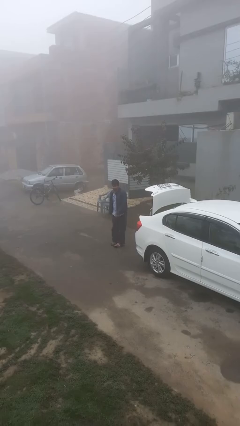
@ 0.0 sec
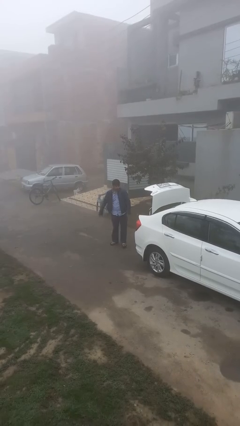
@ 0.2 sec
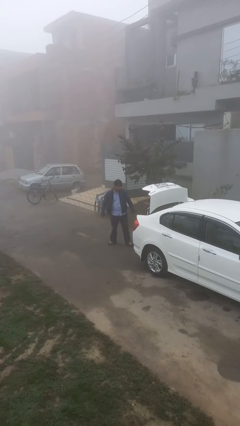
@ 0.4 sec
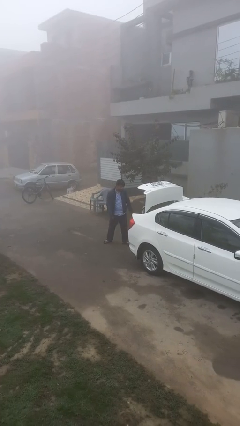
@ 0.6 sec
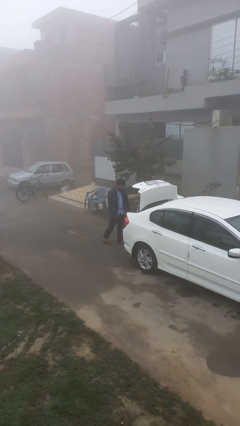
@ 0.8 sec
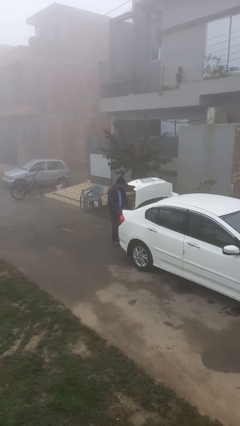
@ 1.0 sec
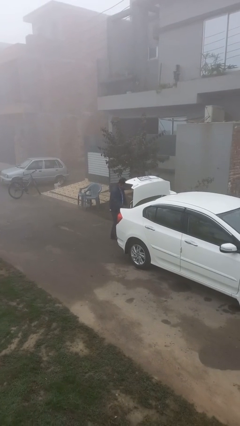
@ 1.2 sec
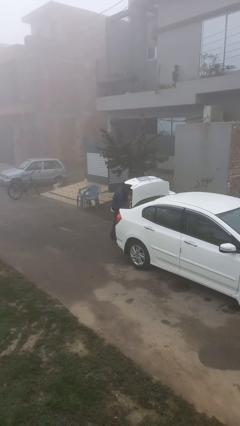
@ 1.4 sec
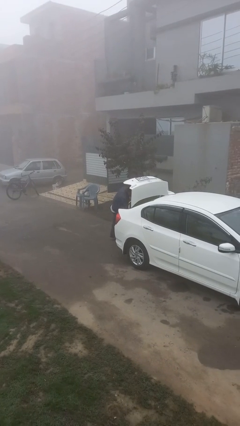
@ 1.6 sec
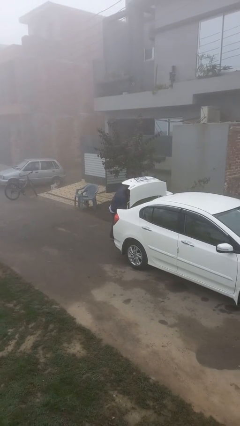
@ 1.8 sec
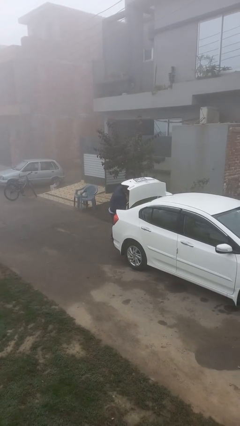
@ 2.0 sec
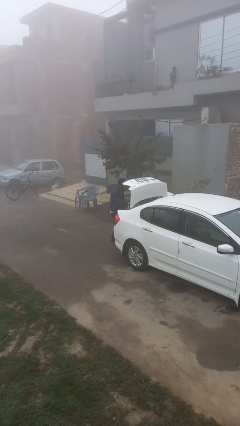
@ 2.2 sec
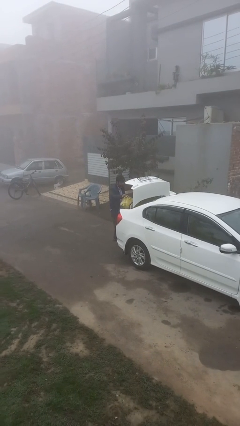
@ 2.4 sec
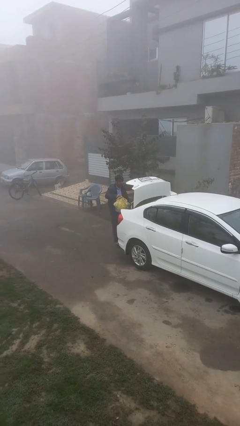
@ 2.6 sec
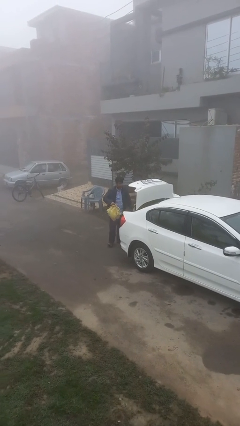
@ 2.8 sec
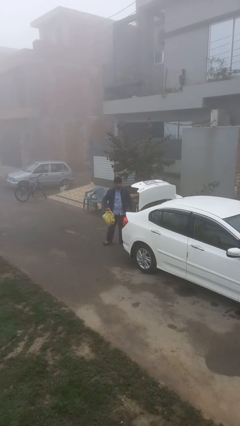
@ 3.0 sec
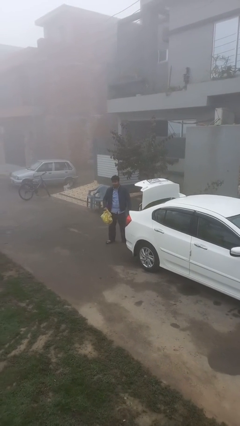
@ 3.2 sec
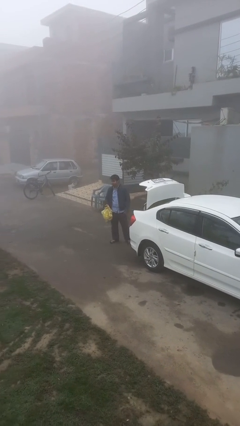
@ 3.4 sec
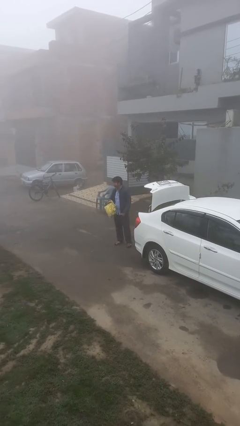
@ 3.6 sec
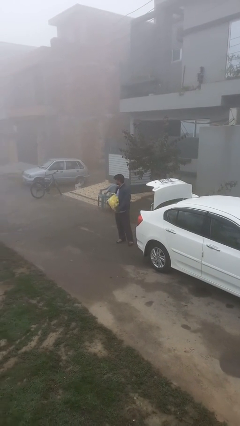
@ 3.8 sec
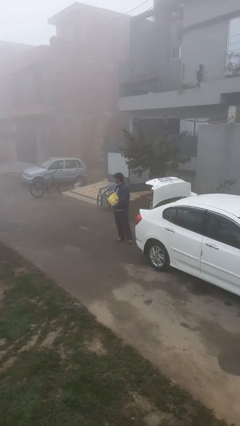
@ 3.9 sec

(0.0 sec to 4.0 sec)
person unloads car

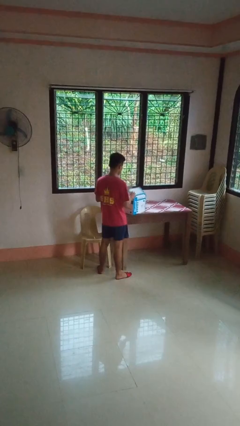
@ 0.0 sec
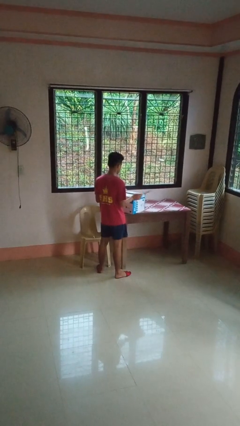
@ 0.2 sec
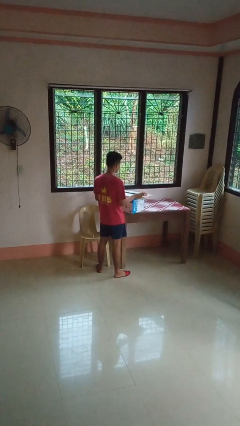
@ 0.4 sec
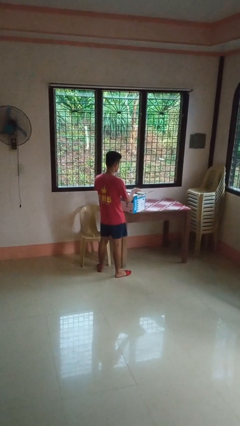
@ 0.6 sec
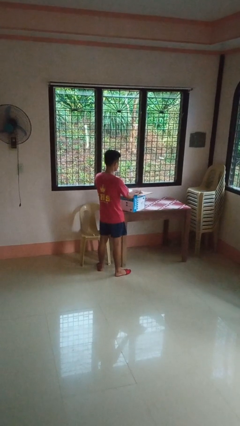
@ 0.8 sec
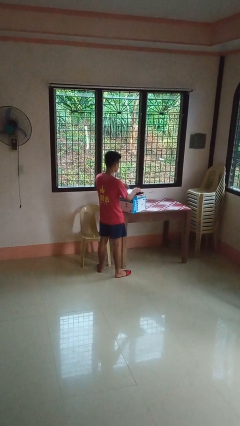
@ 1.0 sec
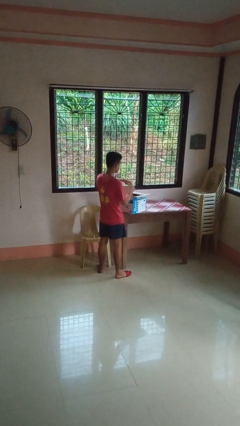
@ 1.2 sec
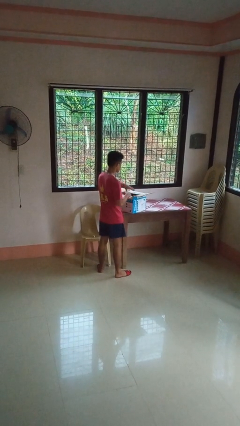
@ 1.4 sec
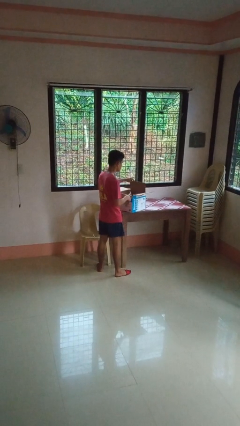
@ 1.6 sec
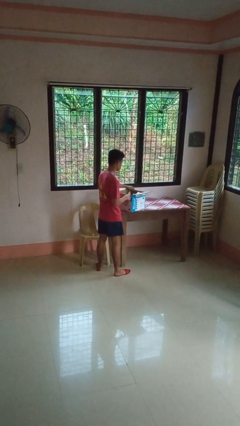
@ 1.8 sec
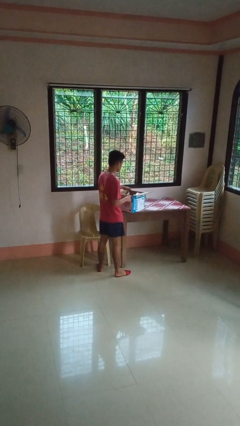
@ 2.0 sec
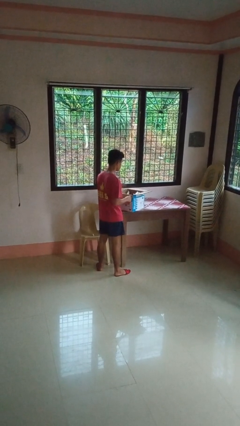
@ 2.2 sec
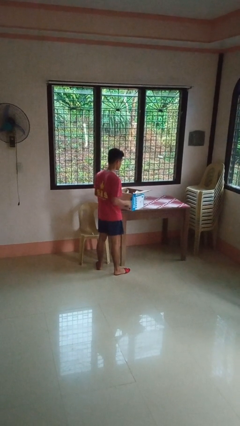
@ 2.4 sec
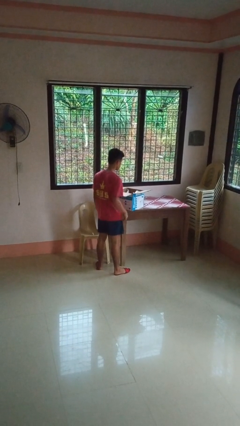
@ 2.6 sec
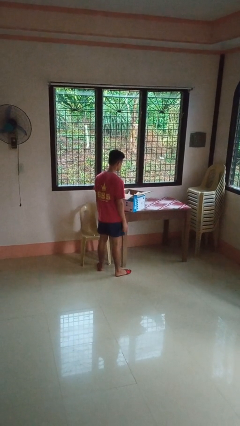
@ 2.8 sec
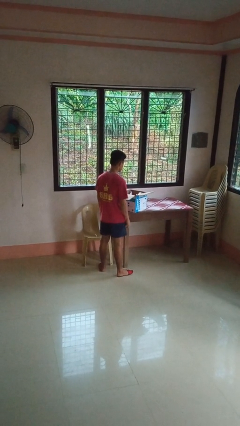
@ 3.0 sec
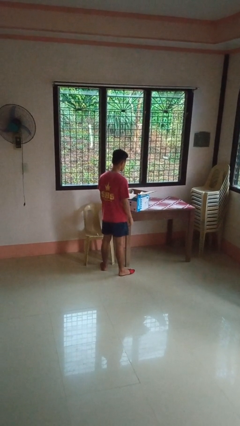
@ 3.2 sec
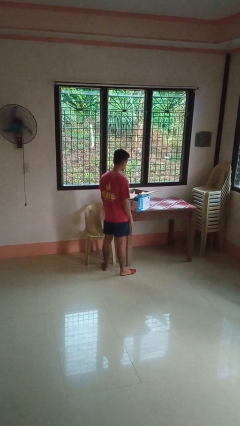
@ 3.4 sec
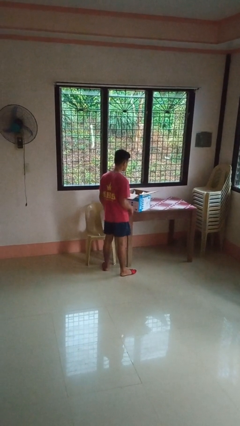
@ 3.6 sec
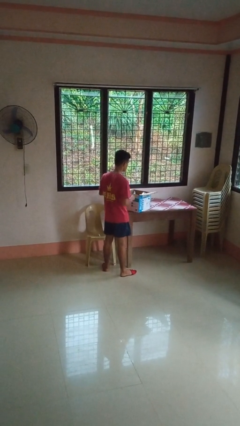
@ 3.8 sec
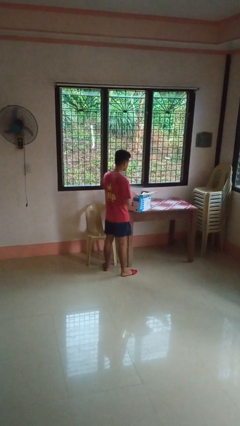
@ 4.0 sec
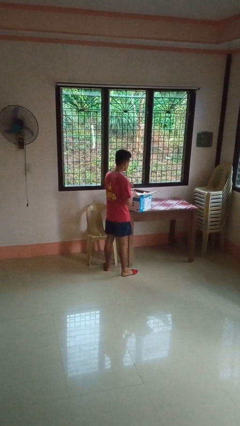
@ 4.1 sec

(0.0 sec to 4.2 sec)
person opens box

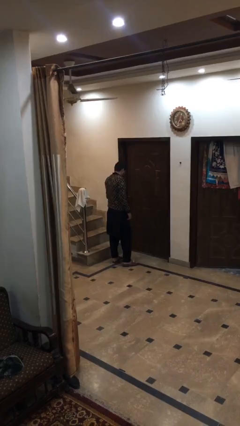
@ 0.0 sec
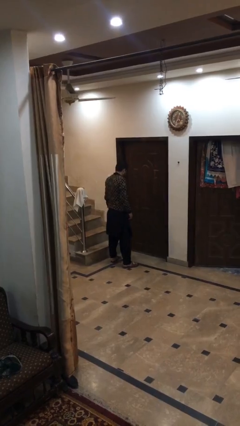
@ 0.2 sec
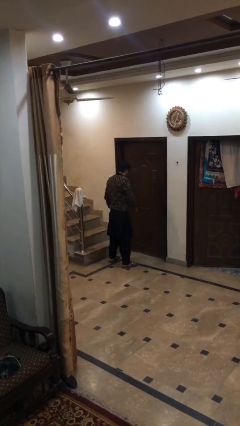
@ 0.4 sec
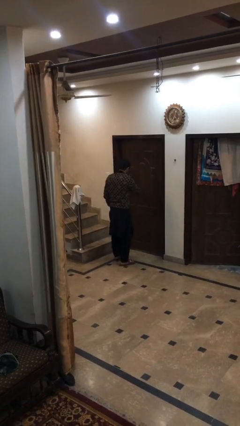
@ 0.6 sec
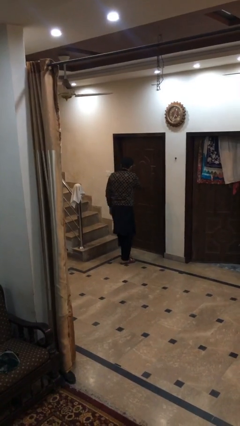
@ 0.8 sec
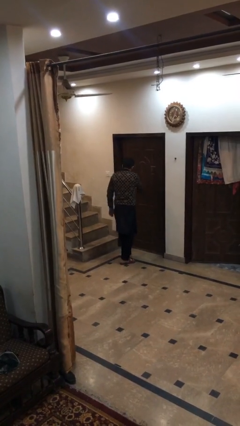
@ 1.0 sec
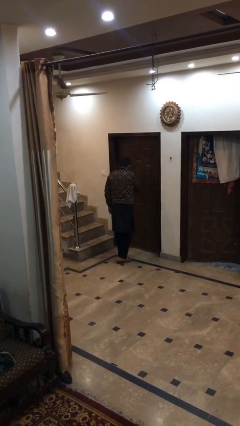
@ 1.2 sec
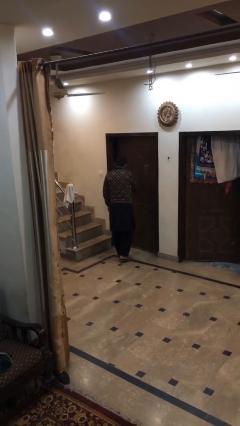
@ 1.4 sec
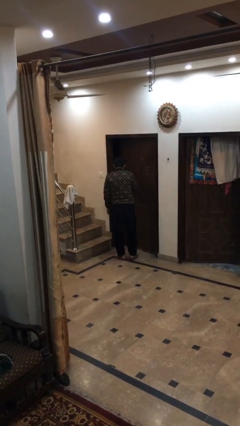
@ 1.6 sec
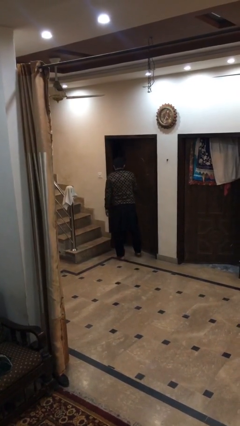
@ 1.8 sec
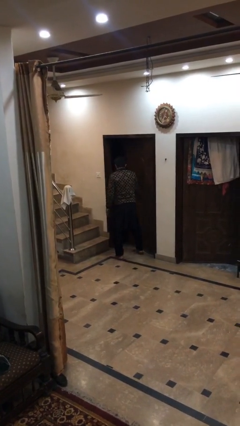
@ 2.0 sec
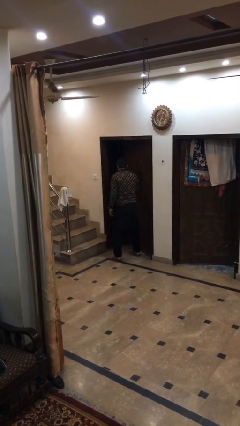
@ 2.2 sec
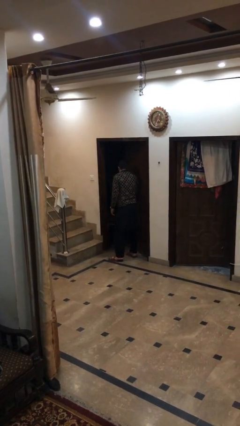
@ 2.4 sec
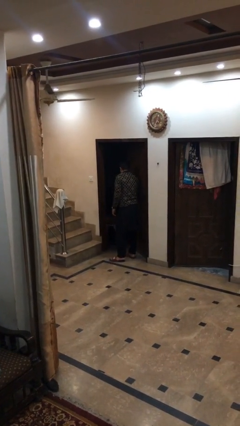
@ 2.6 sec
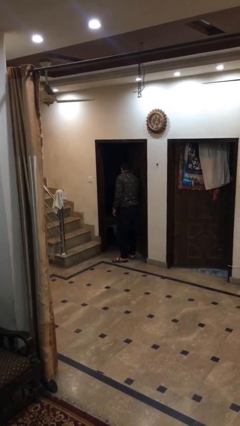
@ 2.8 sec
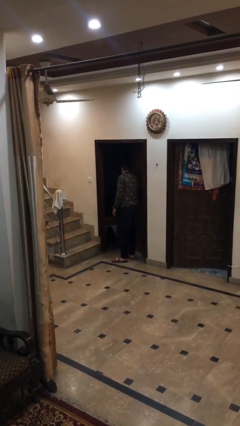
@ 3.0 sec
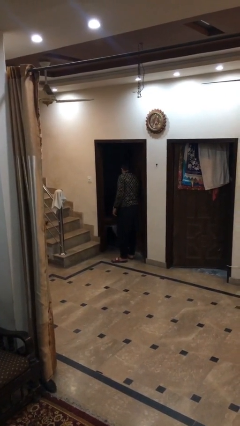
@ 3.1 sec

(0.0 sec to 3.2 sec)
person opens facility door

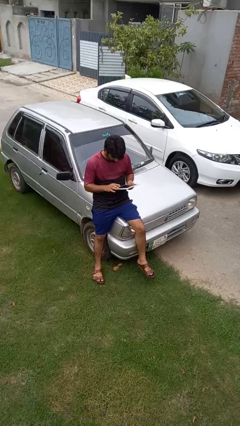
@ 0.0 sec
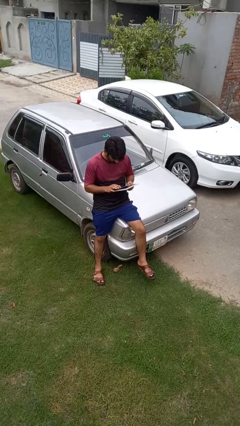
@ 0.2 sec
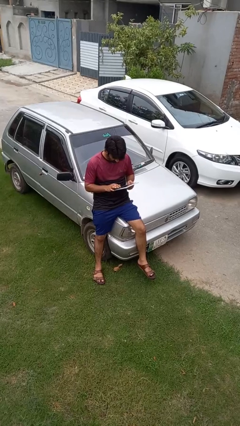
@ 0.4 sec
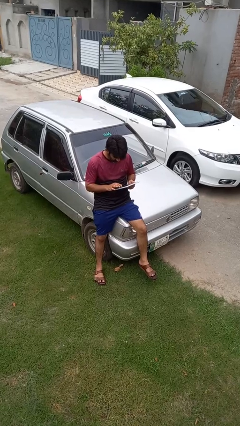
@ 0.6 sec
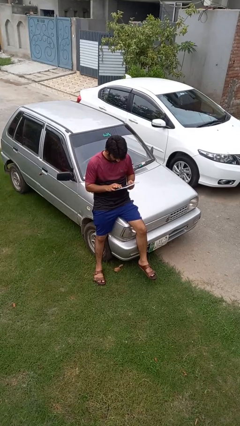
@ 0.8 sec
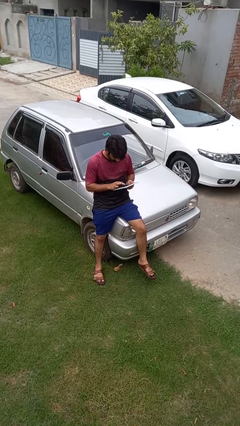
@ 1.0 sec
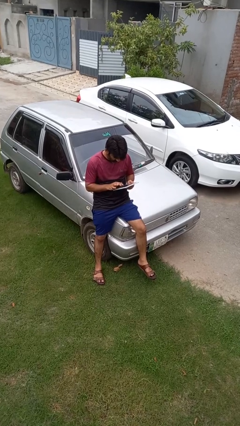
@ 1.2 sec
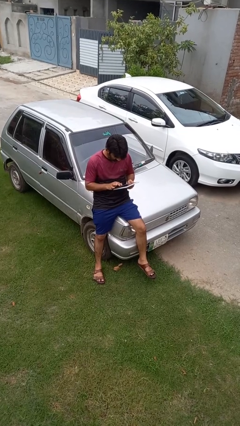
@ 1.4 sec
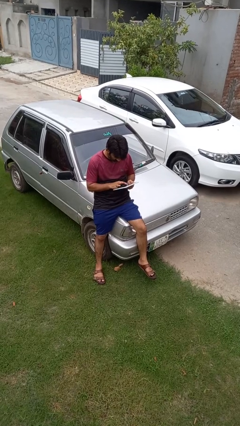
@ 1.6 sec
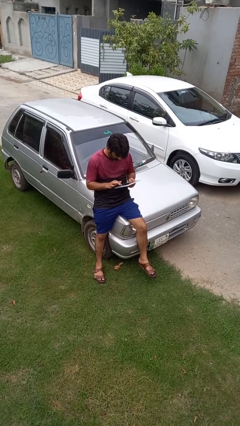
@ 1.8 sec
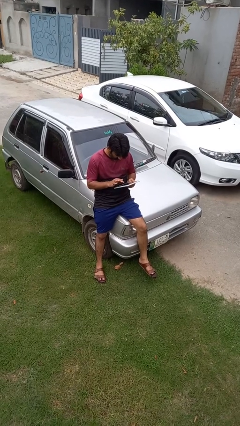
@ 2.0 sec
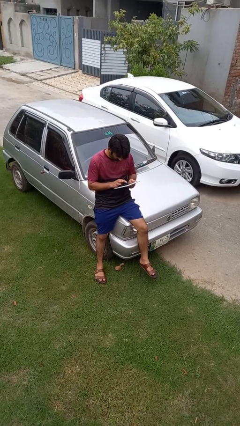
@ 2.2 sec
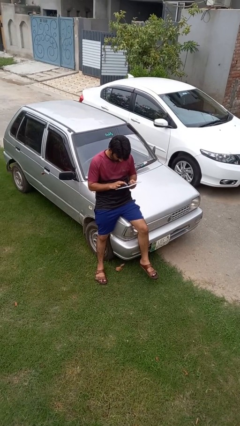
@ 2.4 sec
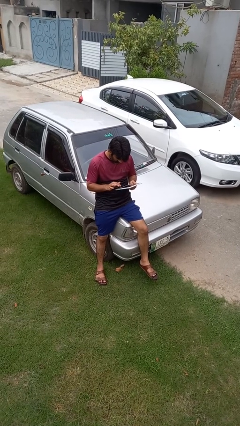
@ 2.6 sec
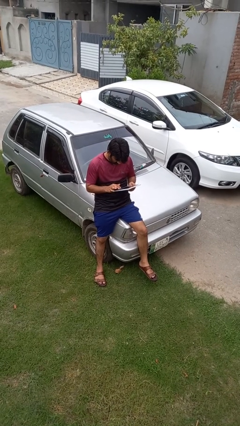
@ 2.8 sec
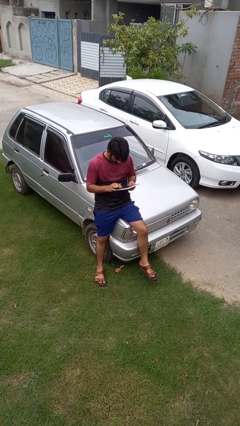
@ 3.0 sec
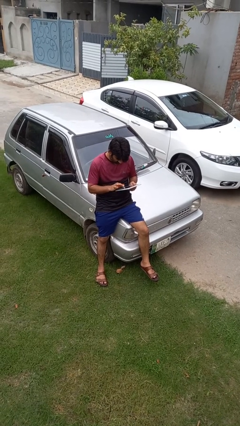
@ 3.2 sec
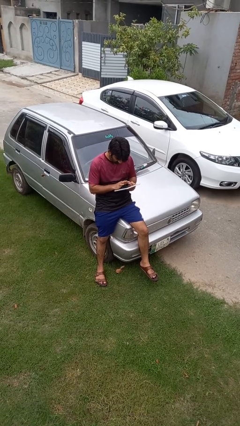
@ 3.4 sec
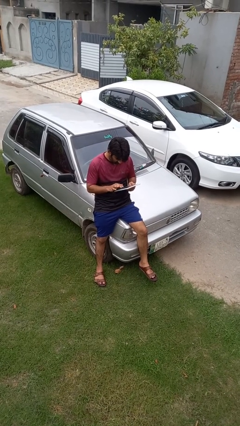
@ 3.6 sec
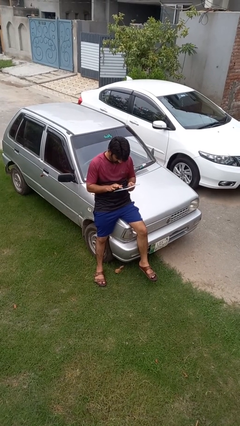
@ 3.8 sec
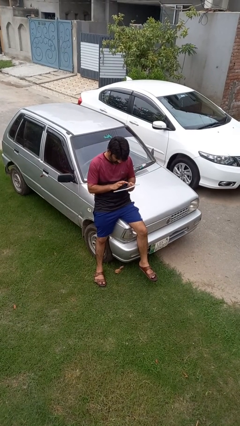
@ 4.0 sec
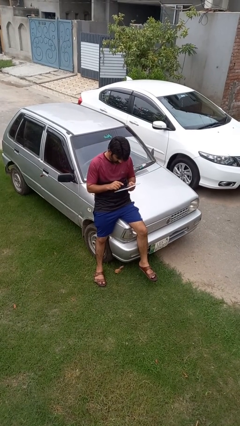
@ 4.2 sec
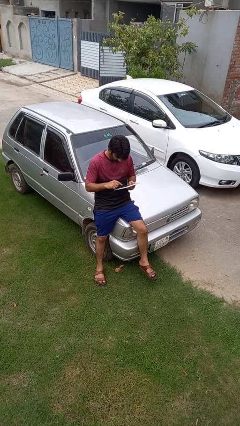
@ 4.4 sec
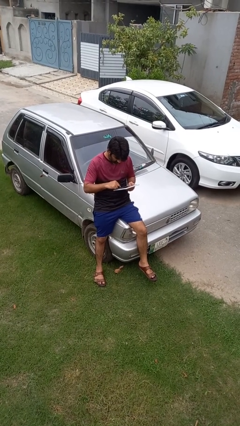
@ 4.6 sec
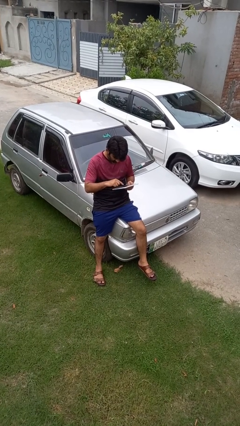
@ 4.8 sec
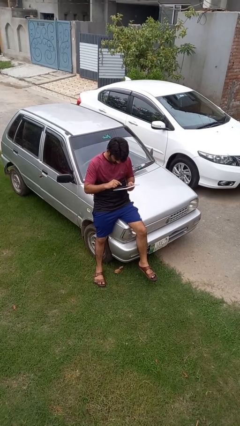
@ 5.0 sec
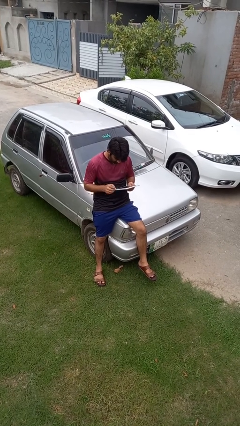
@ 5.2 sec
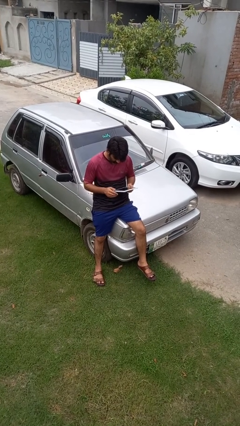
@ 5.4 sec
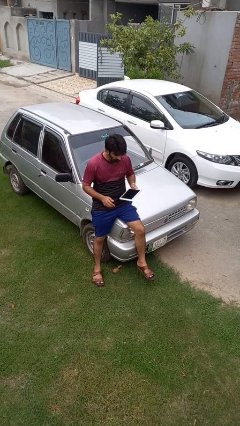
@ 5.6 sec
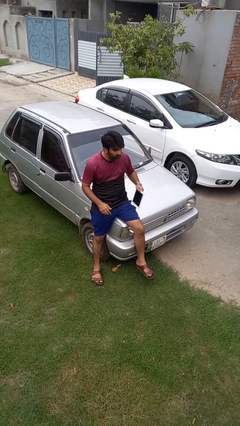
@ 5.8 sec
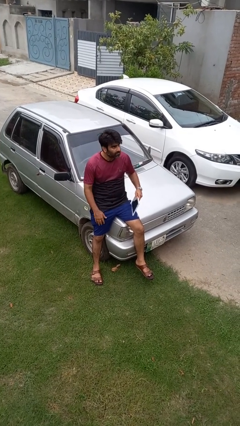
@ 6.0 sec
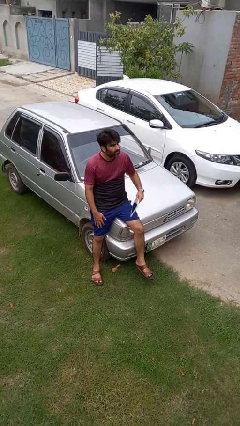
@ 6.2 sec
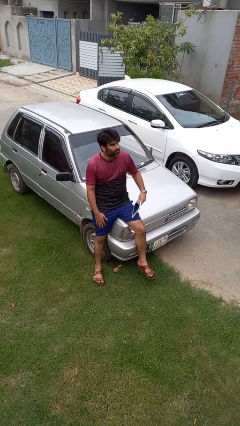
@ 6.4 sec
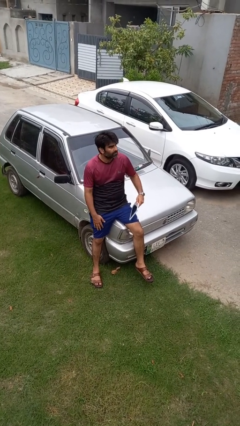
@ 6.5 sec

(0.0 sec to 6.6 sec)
person interacts with tablet
